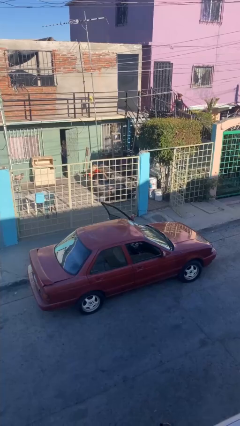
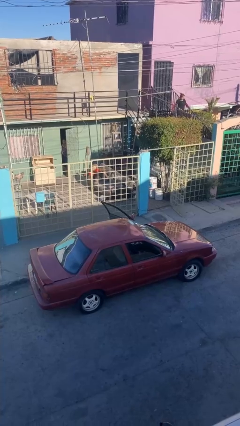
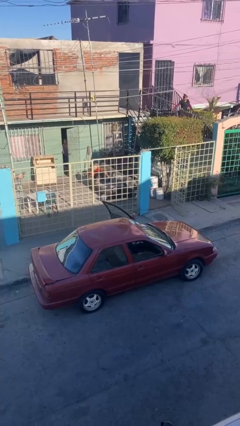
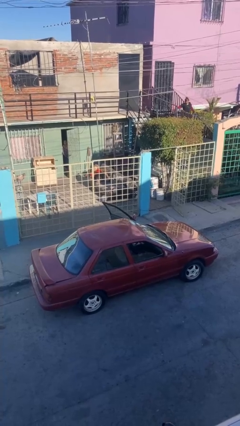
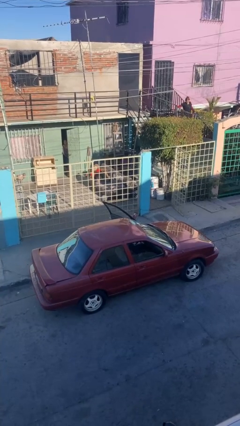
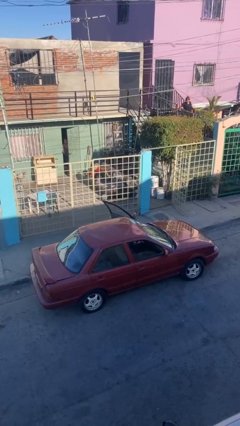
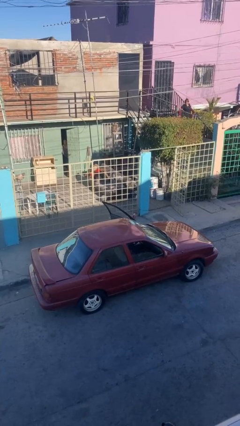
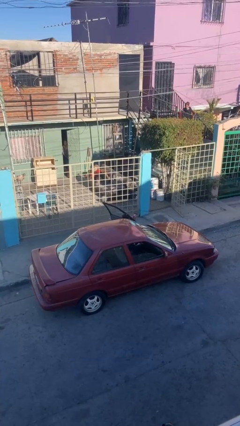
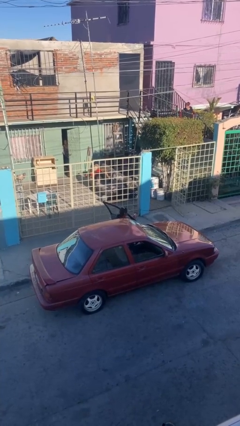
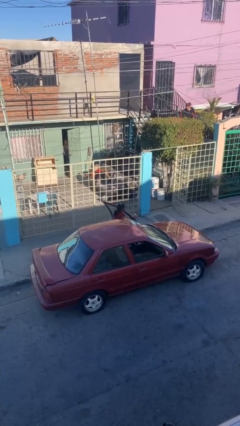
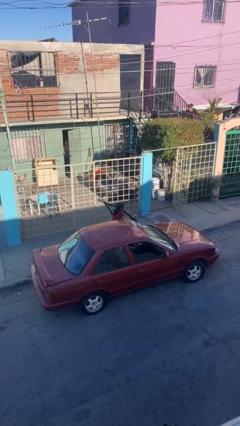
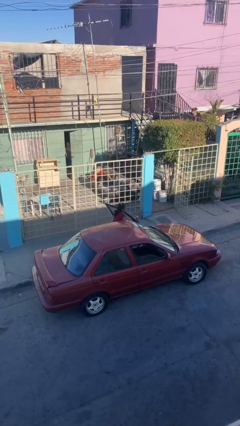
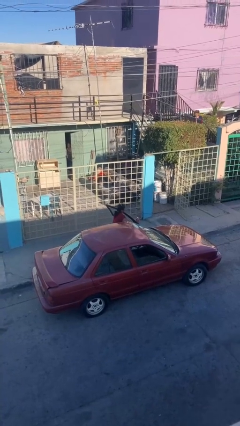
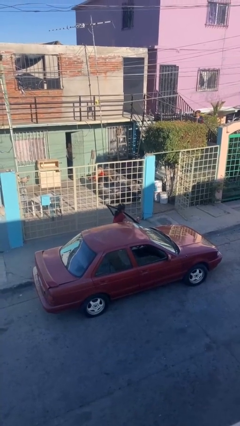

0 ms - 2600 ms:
person exits car

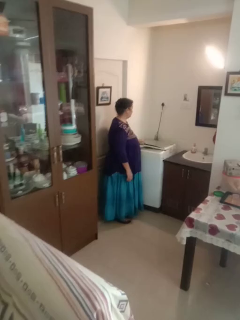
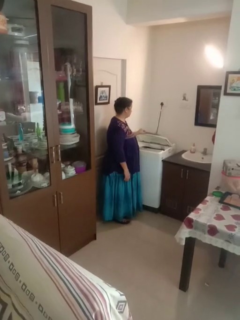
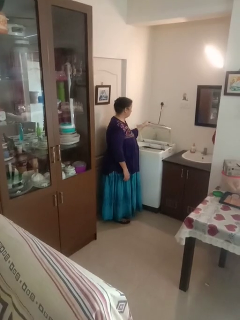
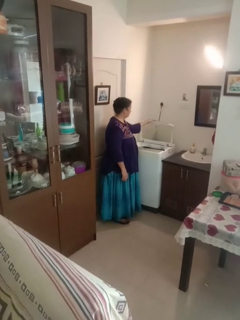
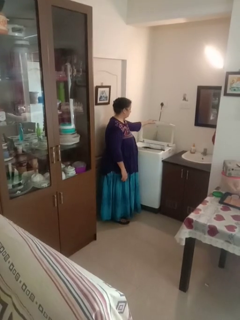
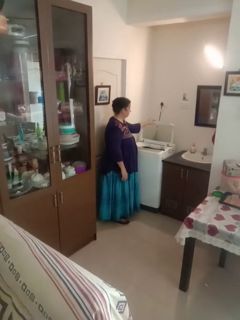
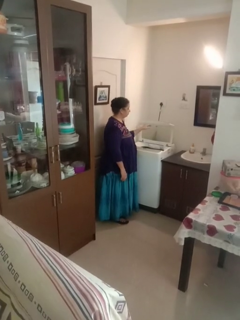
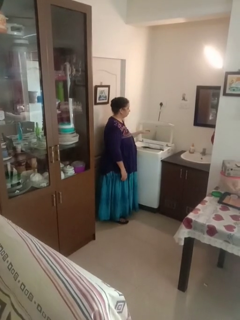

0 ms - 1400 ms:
person opens clothes washer

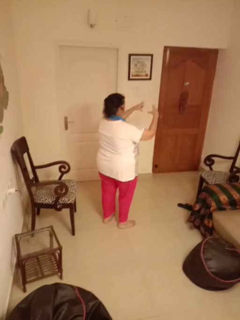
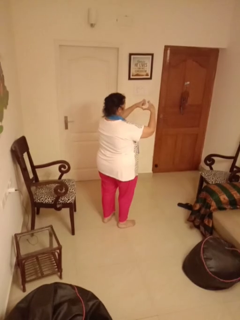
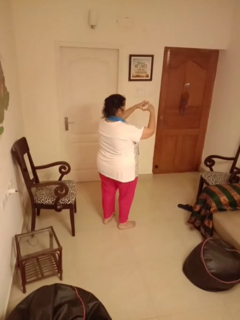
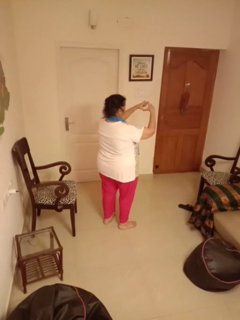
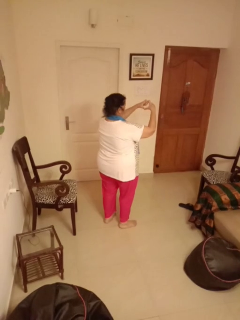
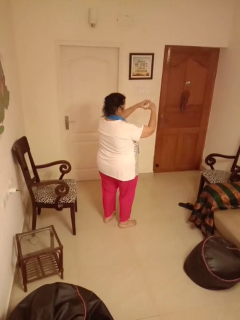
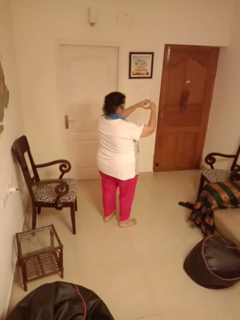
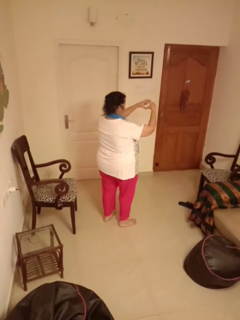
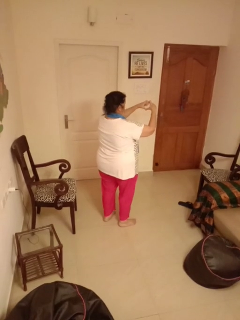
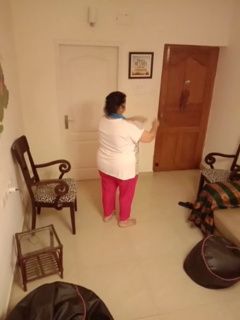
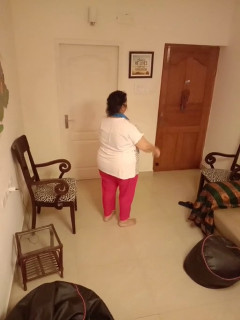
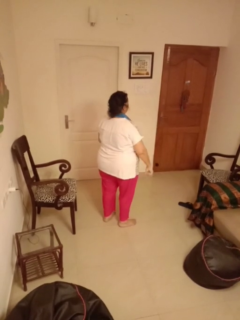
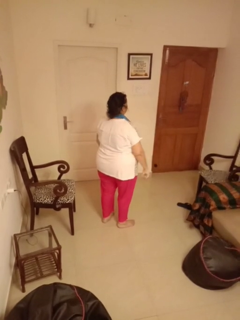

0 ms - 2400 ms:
person gestures heart

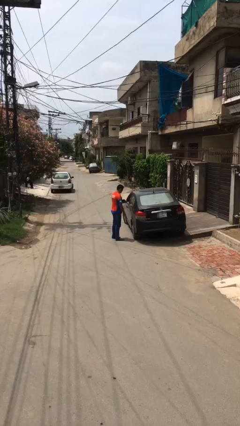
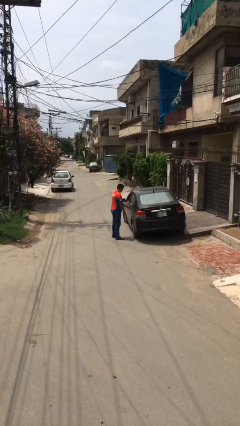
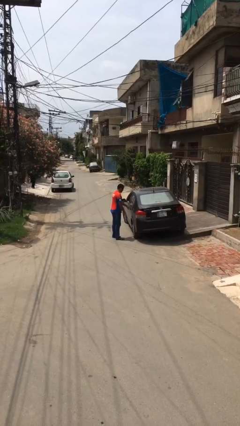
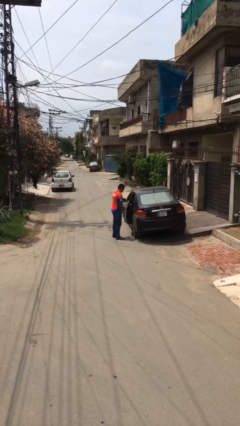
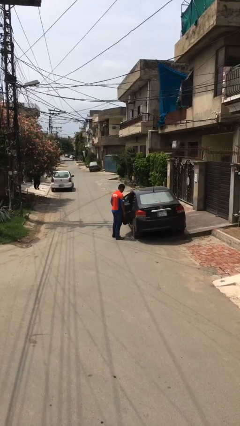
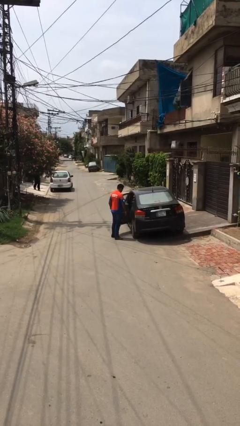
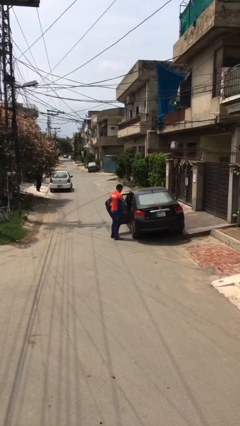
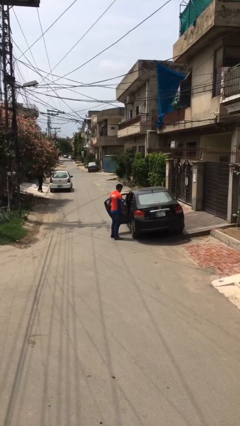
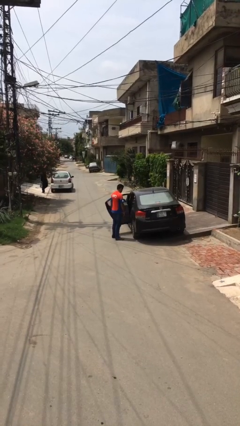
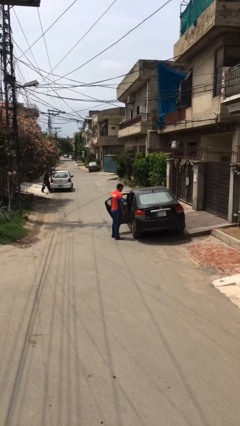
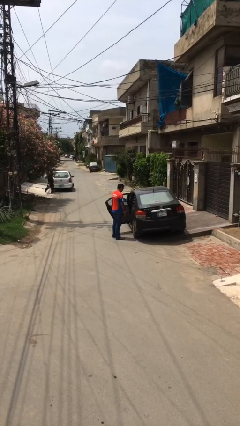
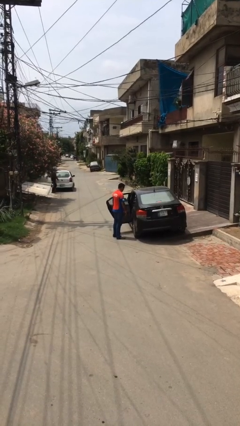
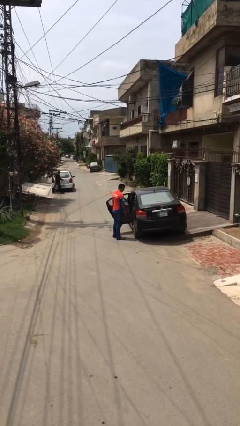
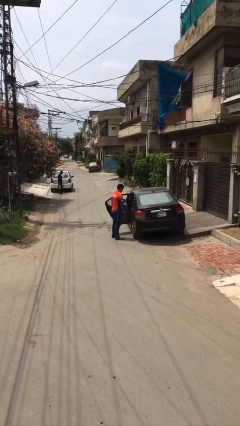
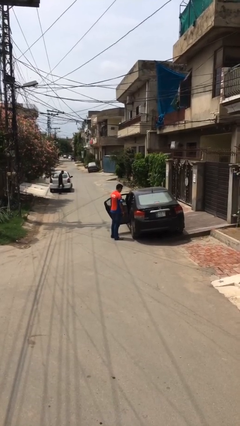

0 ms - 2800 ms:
person opens car door

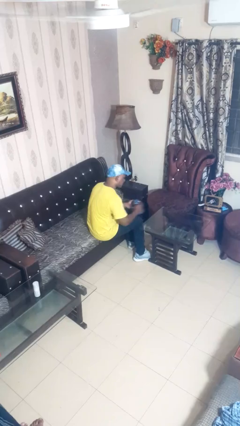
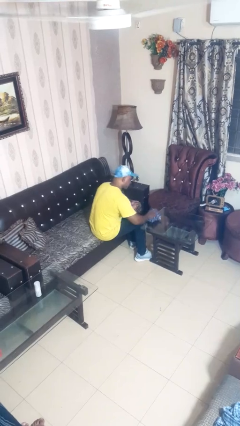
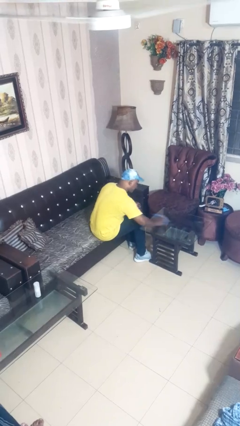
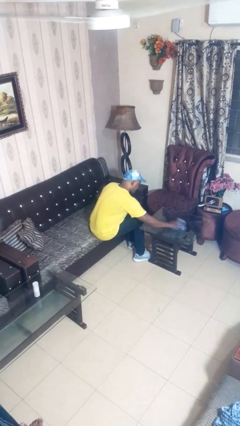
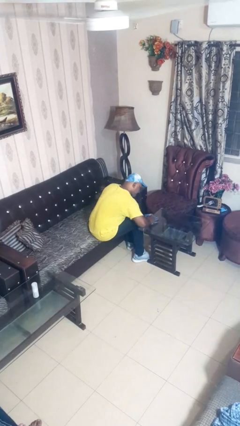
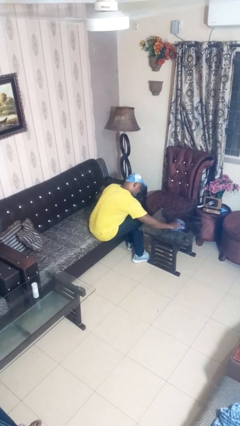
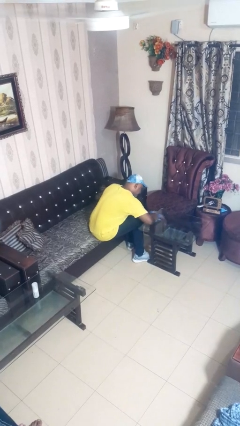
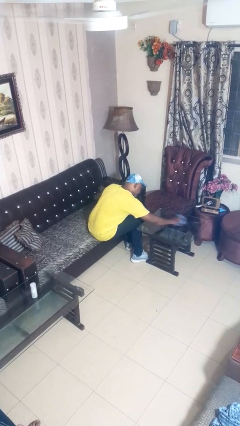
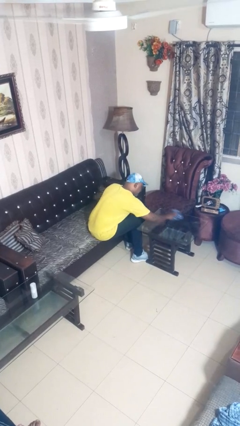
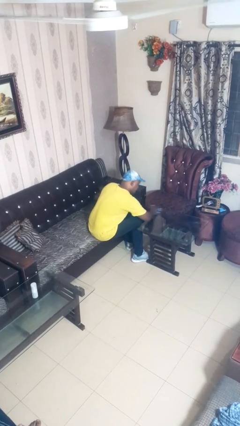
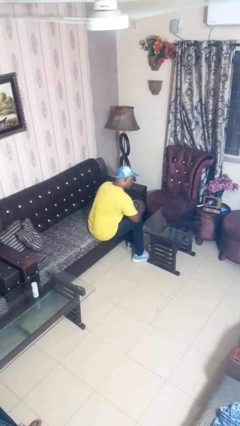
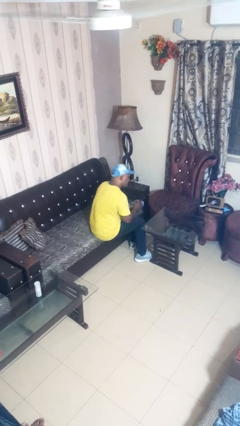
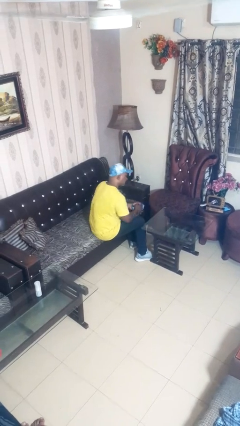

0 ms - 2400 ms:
person cleans table with rag

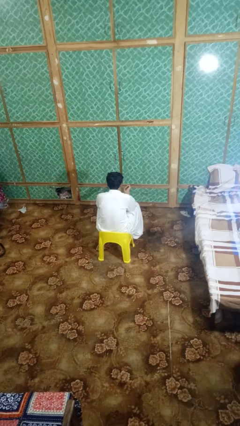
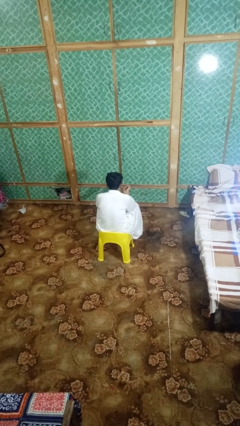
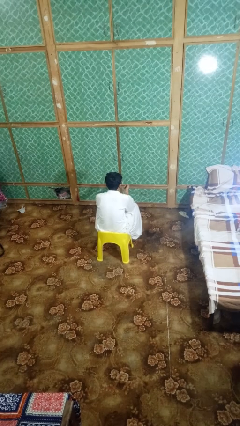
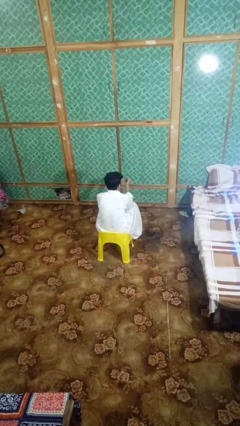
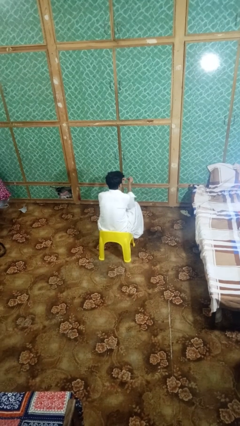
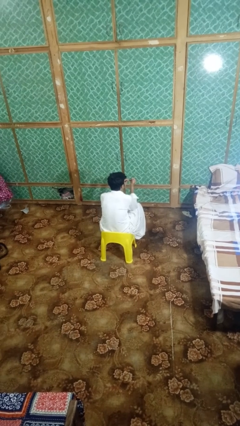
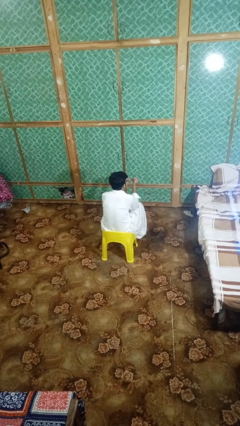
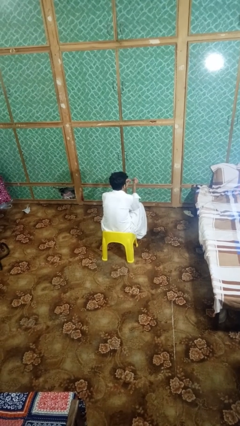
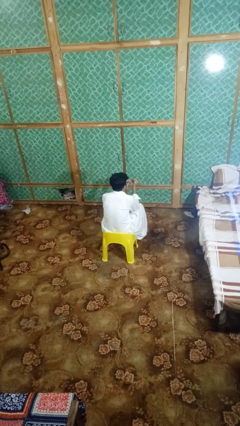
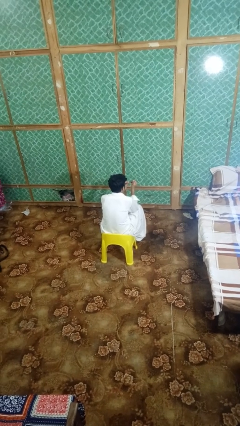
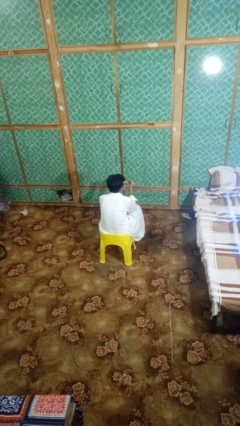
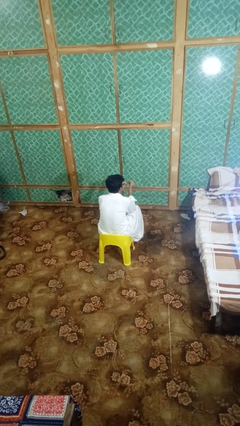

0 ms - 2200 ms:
person files fingernails

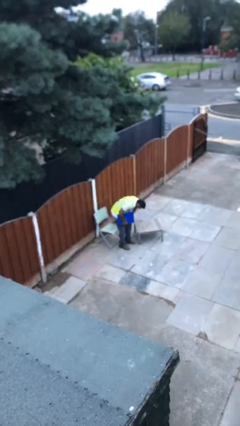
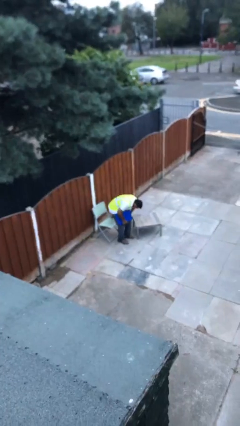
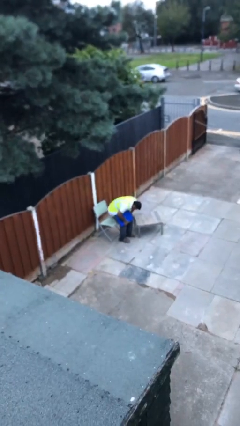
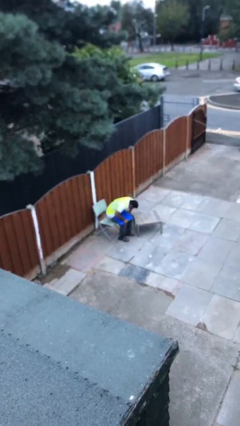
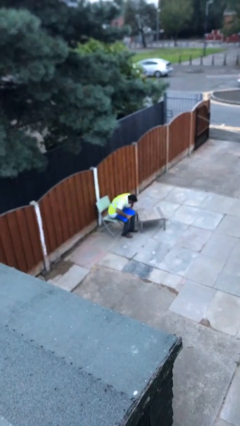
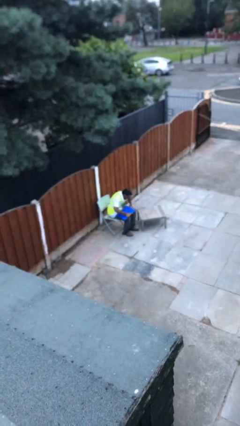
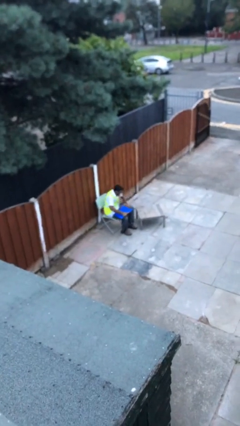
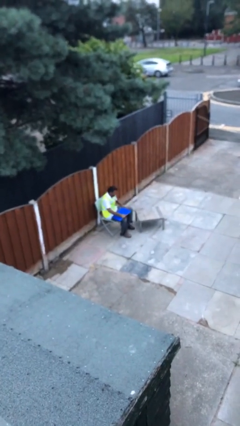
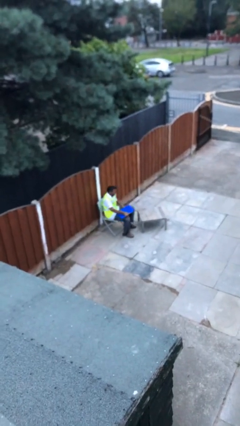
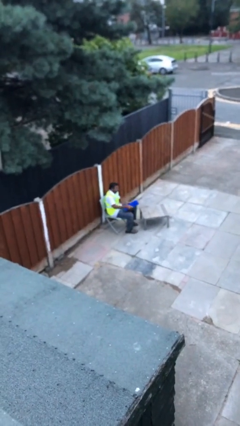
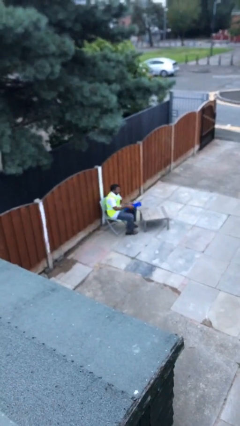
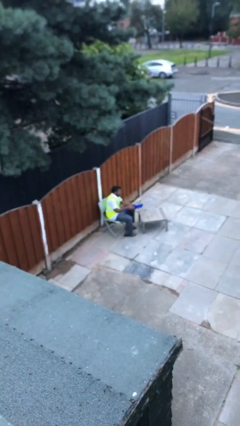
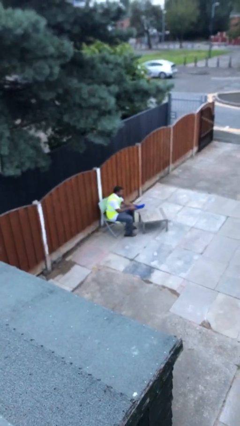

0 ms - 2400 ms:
person sits down

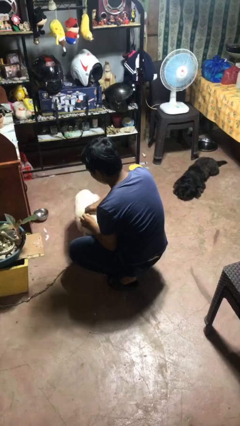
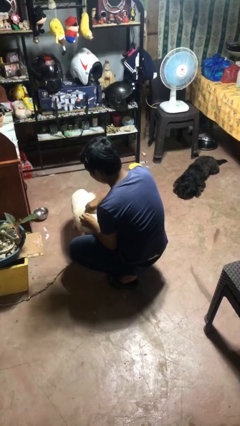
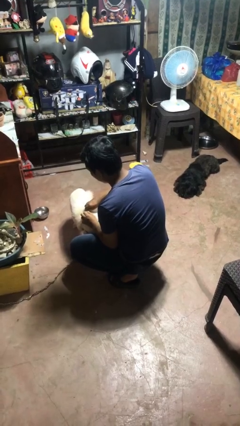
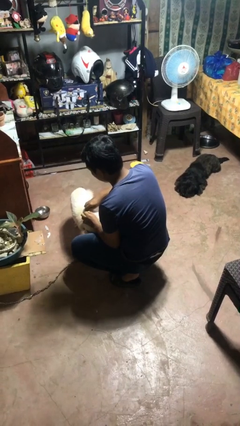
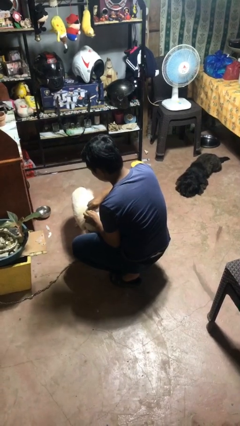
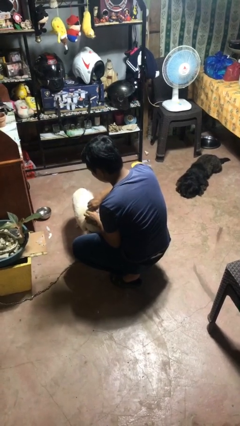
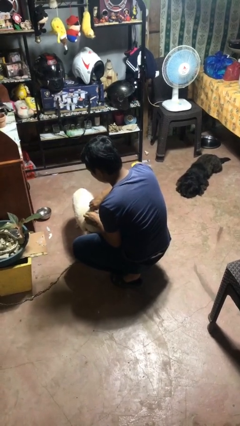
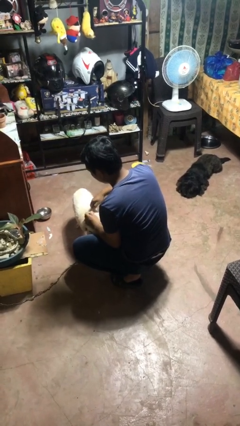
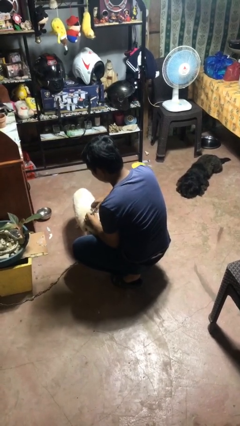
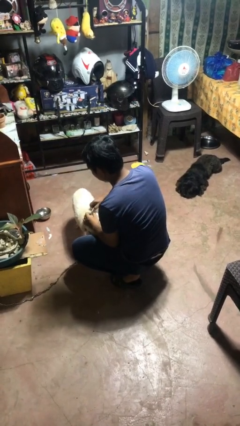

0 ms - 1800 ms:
person attaches leash to dog
